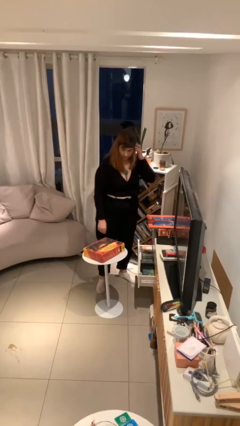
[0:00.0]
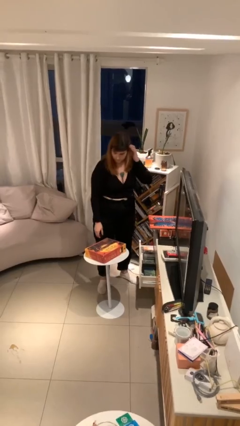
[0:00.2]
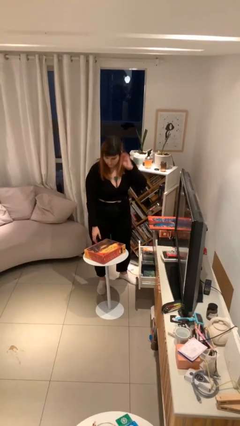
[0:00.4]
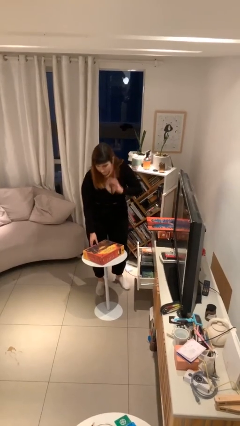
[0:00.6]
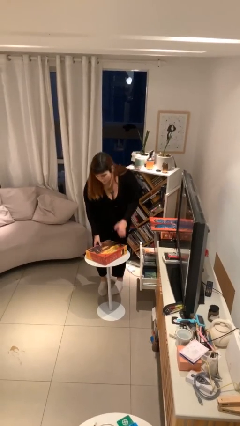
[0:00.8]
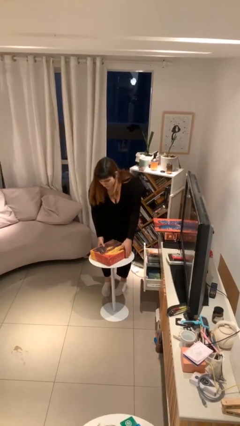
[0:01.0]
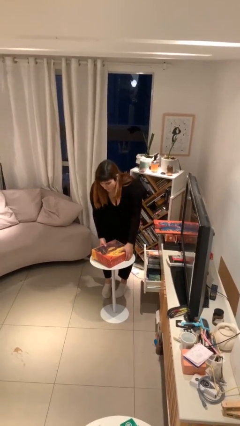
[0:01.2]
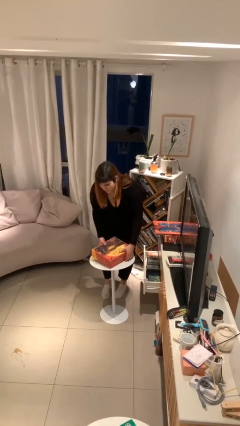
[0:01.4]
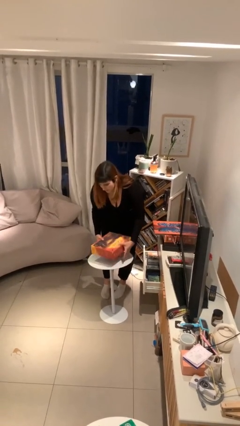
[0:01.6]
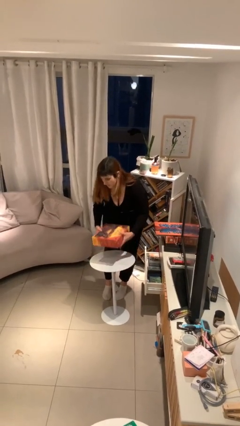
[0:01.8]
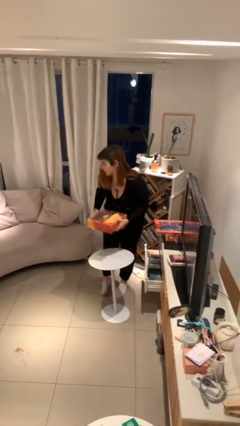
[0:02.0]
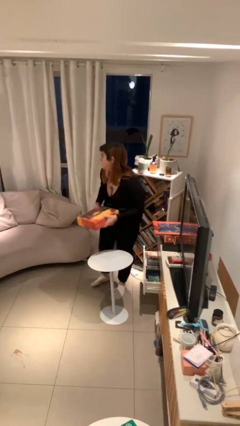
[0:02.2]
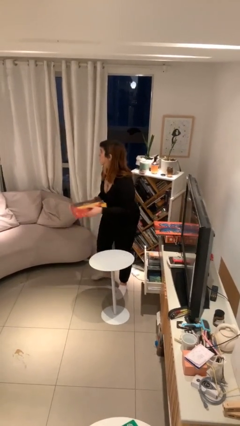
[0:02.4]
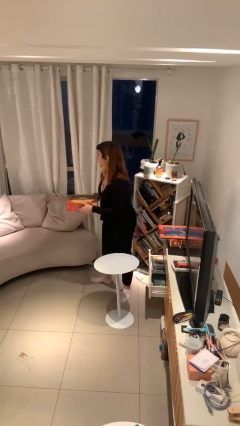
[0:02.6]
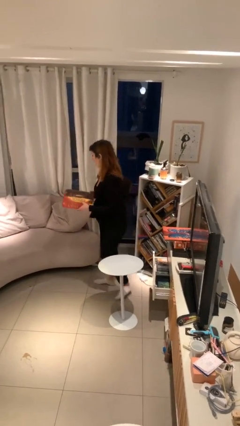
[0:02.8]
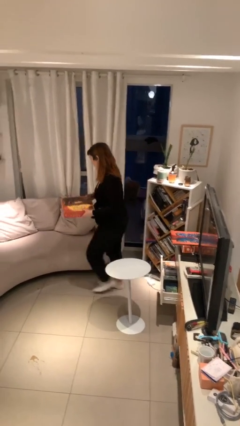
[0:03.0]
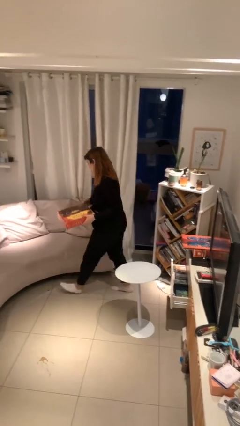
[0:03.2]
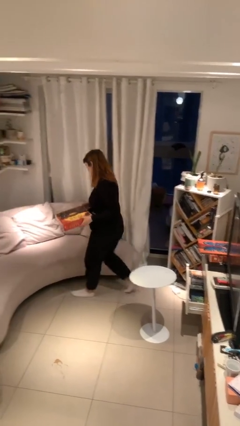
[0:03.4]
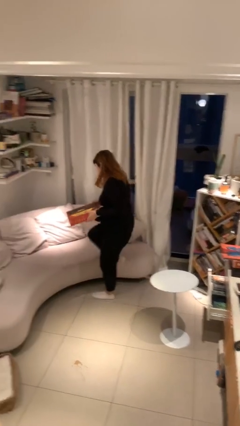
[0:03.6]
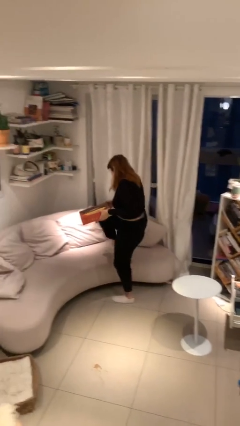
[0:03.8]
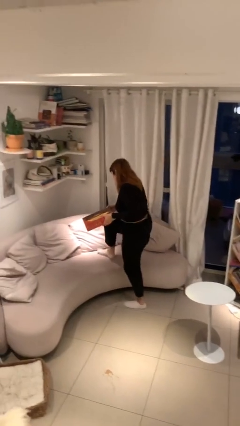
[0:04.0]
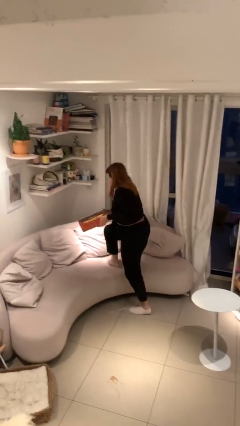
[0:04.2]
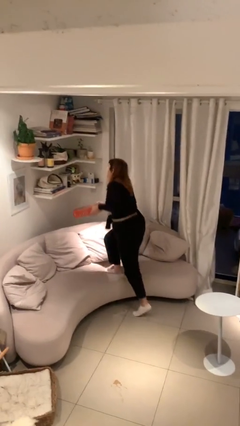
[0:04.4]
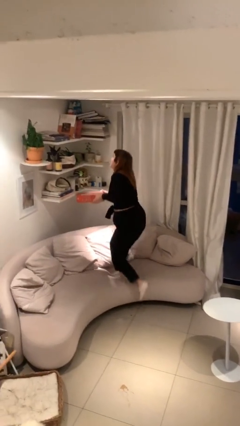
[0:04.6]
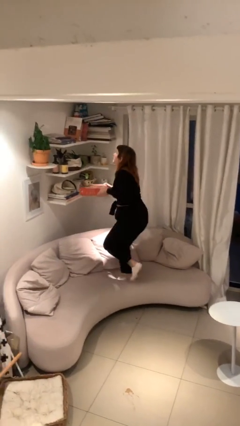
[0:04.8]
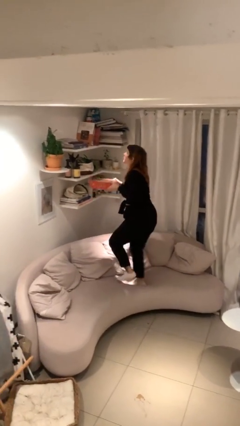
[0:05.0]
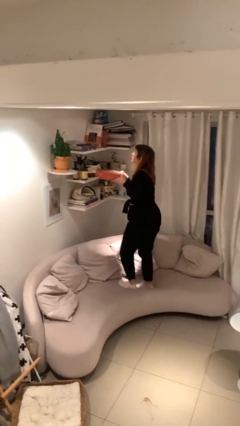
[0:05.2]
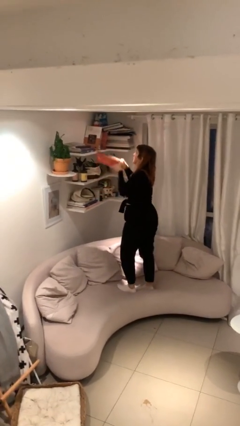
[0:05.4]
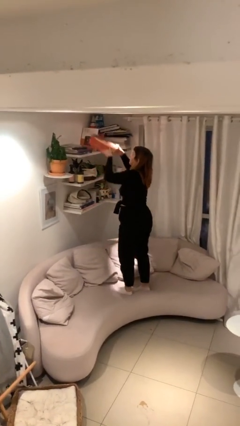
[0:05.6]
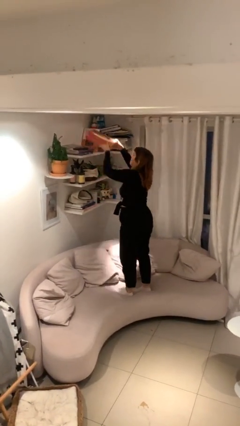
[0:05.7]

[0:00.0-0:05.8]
person picks up object from table

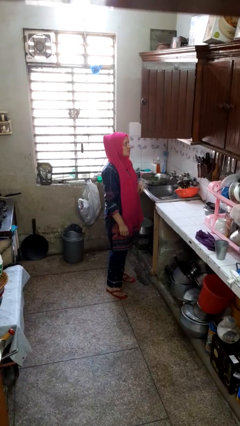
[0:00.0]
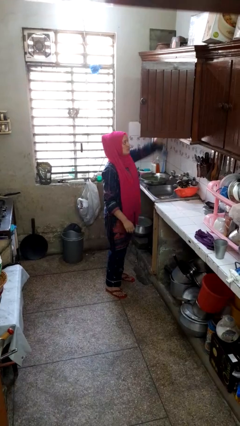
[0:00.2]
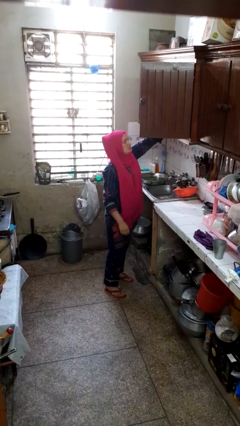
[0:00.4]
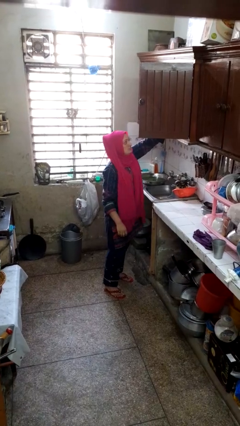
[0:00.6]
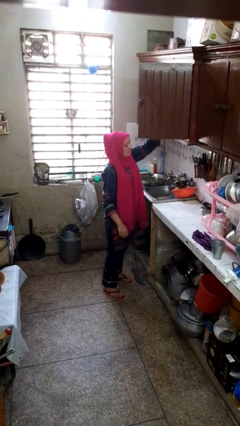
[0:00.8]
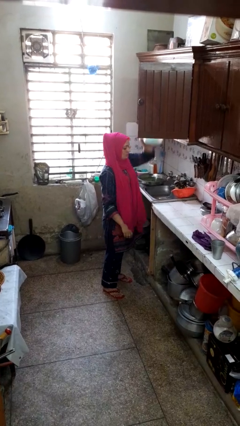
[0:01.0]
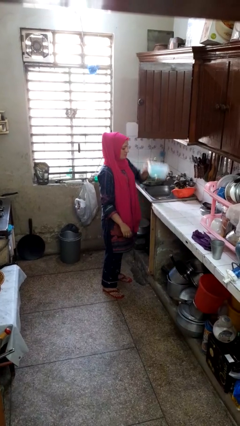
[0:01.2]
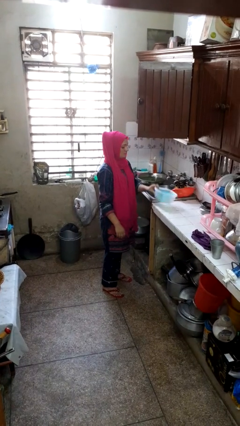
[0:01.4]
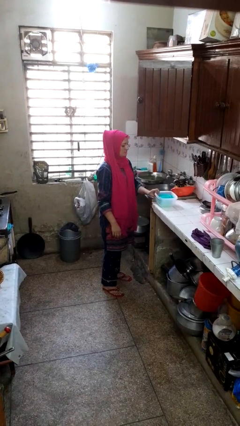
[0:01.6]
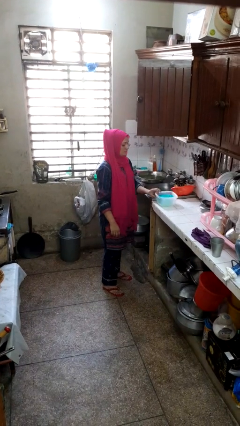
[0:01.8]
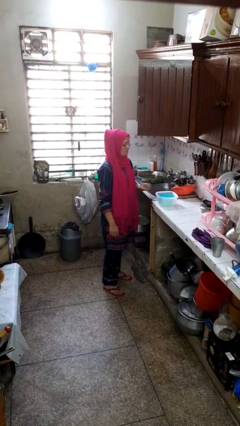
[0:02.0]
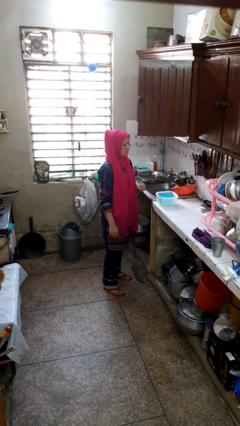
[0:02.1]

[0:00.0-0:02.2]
person takes object from cabinet

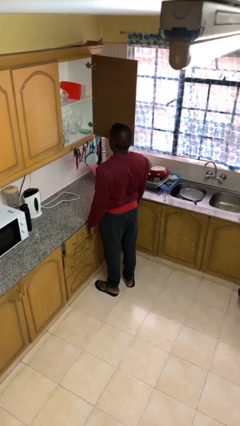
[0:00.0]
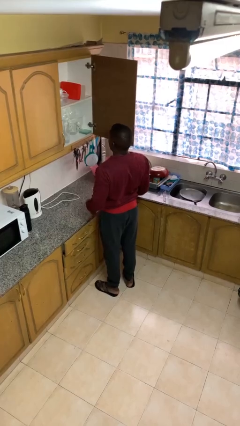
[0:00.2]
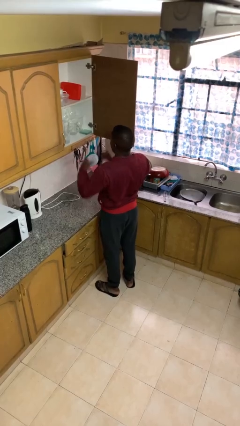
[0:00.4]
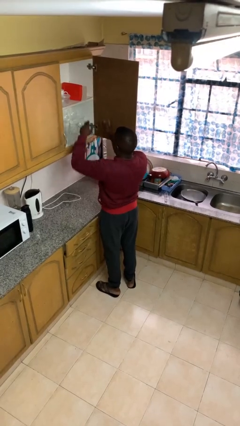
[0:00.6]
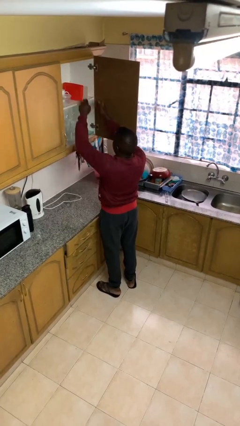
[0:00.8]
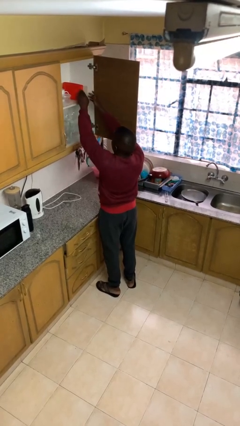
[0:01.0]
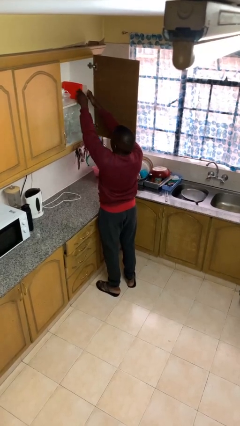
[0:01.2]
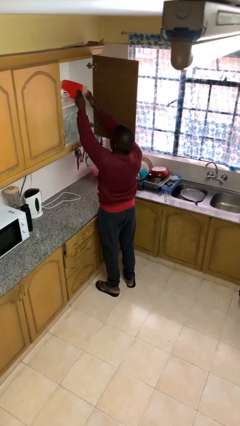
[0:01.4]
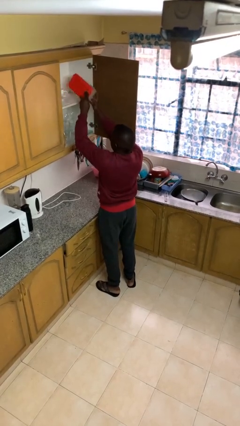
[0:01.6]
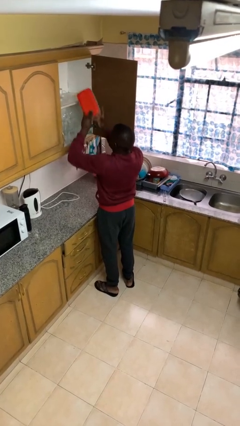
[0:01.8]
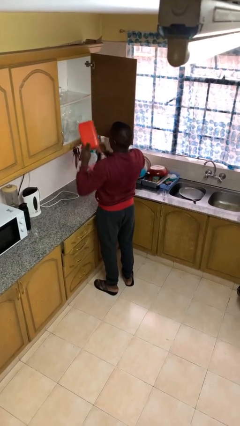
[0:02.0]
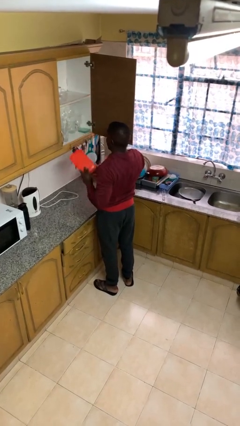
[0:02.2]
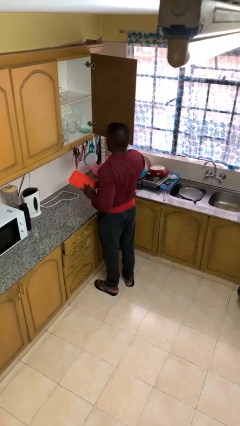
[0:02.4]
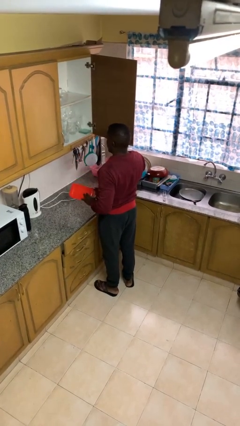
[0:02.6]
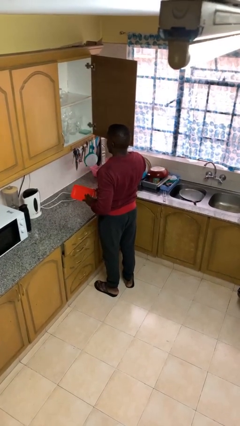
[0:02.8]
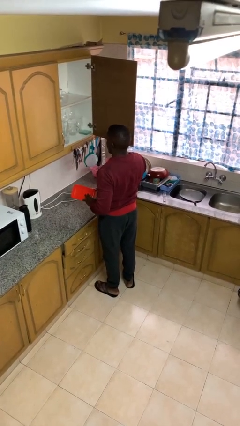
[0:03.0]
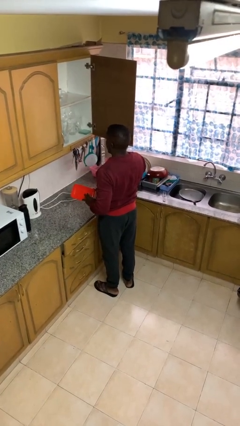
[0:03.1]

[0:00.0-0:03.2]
person picks up object from cabinet

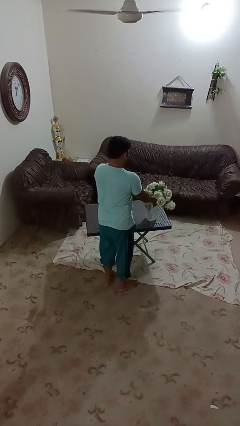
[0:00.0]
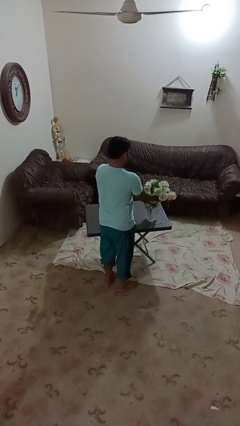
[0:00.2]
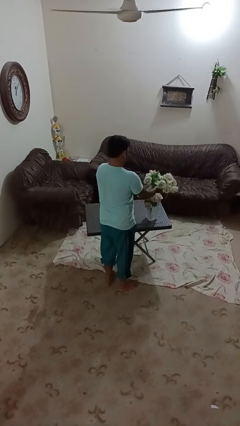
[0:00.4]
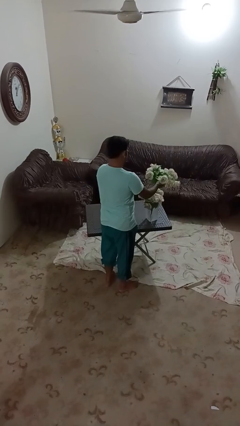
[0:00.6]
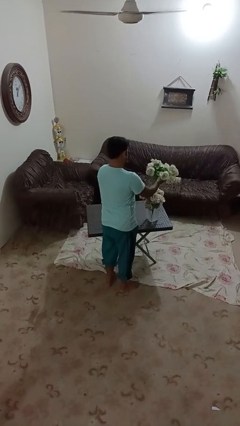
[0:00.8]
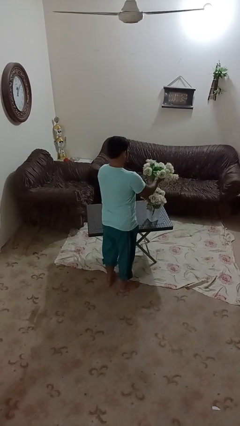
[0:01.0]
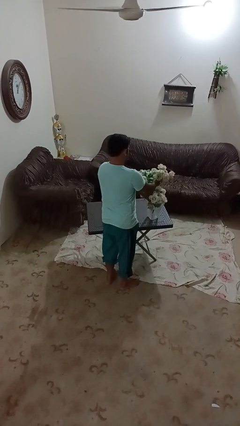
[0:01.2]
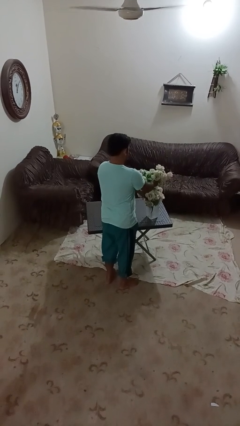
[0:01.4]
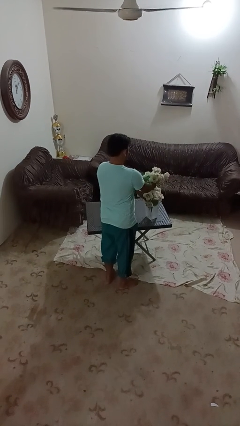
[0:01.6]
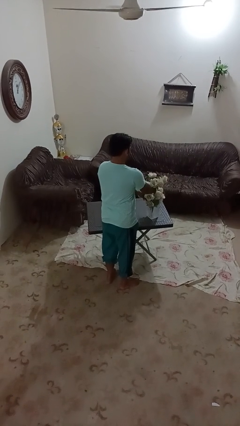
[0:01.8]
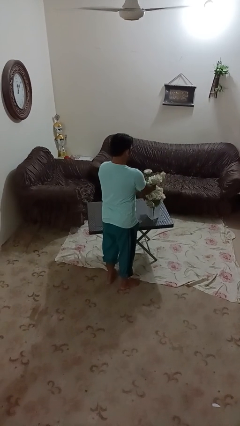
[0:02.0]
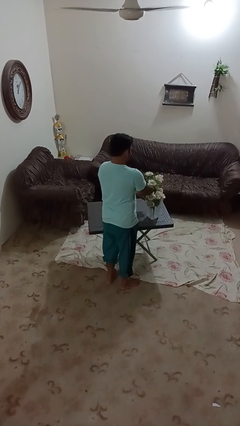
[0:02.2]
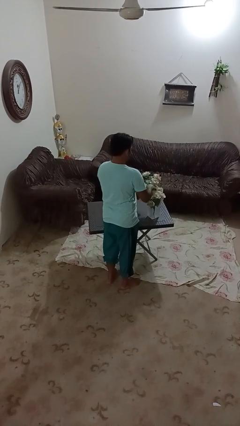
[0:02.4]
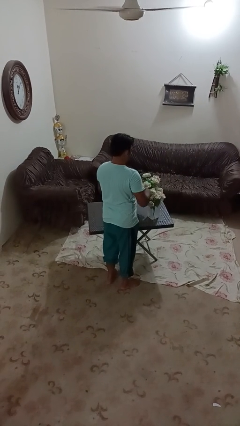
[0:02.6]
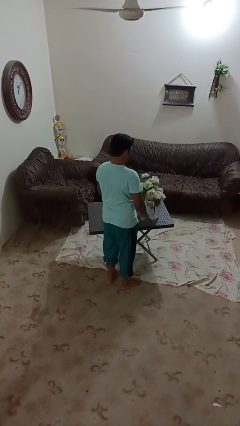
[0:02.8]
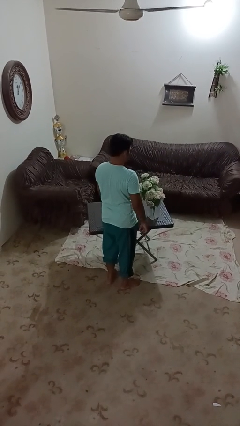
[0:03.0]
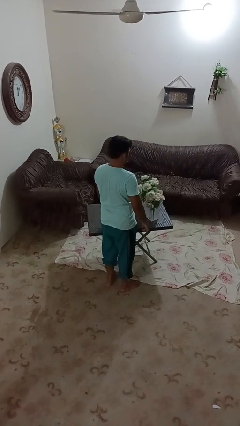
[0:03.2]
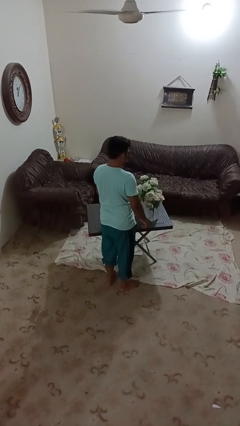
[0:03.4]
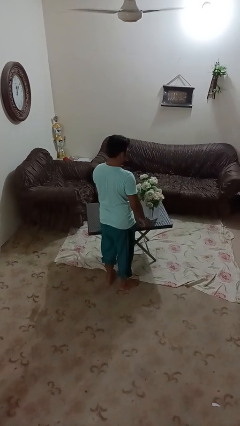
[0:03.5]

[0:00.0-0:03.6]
person arranges flowers in vase

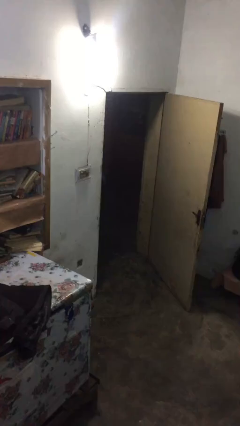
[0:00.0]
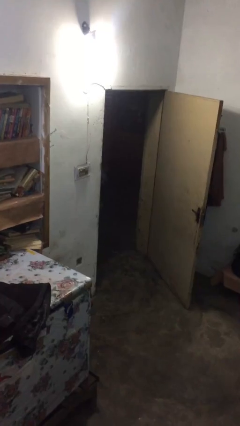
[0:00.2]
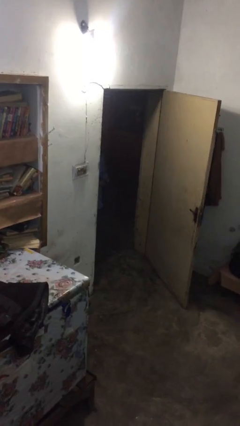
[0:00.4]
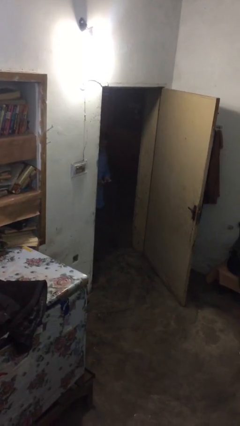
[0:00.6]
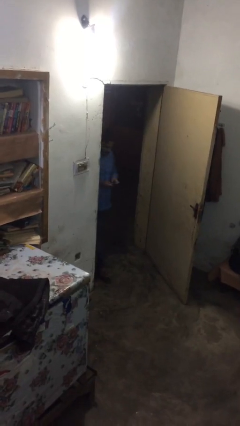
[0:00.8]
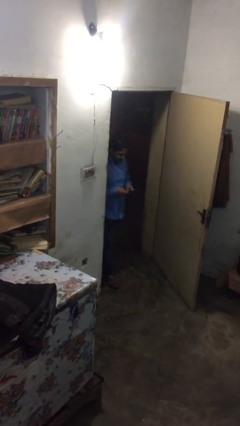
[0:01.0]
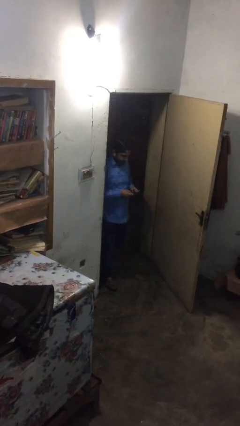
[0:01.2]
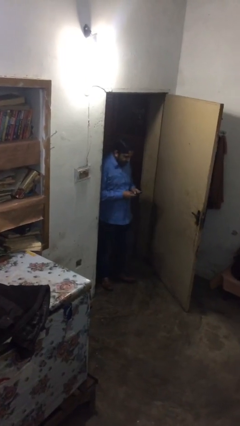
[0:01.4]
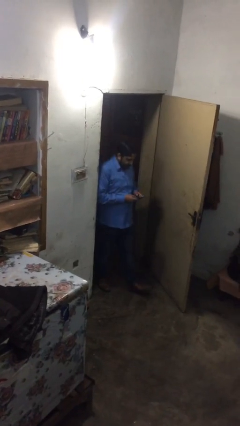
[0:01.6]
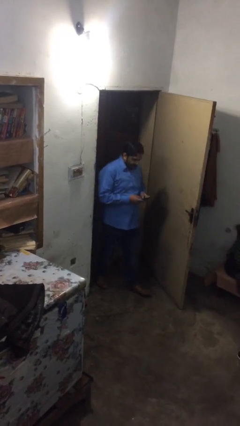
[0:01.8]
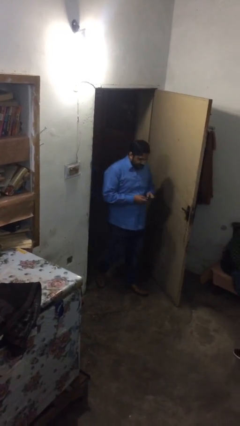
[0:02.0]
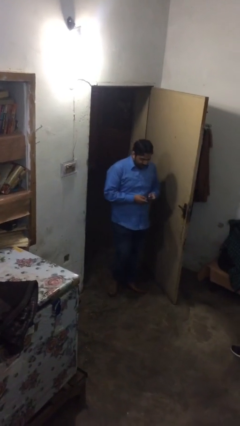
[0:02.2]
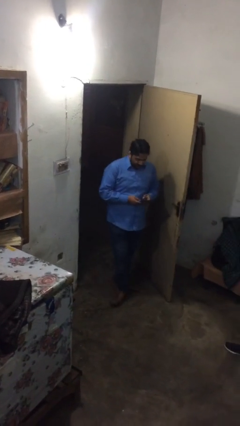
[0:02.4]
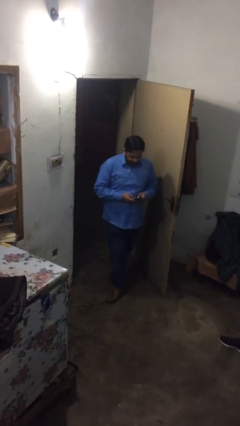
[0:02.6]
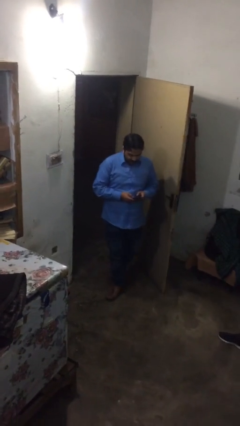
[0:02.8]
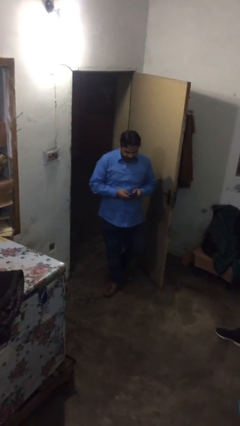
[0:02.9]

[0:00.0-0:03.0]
person enters scene through structure
